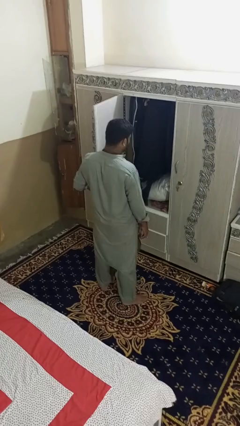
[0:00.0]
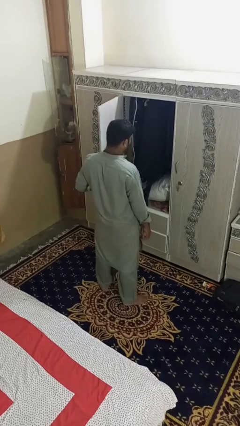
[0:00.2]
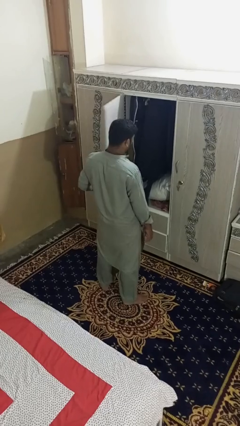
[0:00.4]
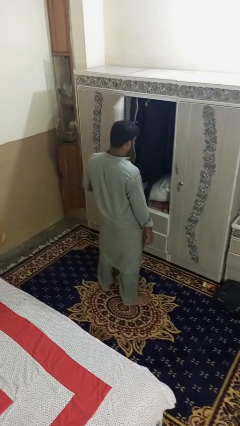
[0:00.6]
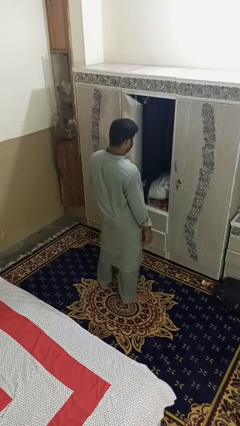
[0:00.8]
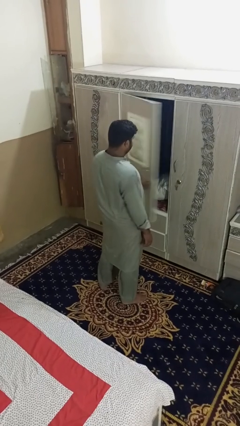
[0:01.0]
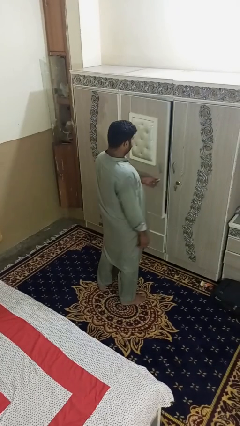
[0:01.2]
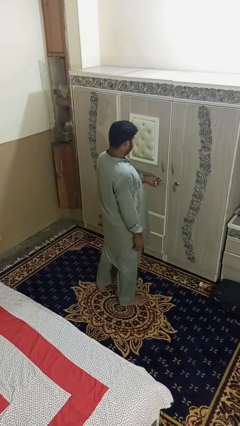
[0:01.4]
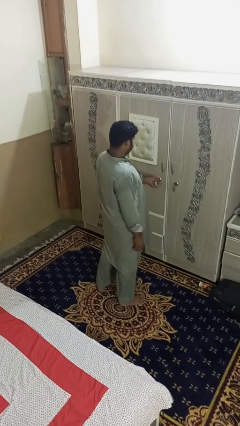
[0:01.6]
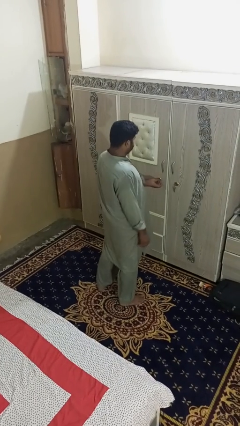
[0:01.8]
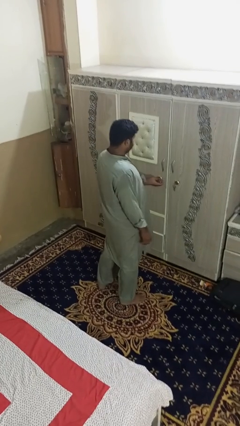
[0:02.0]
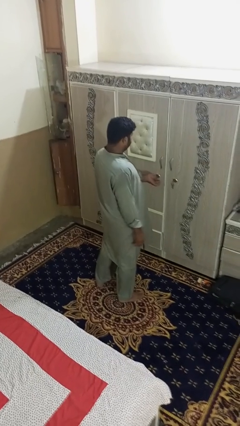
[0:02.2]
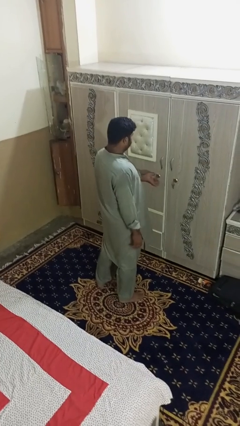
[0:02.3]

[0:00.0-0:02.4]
person closes dresser drawer

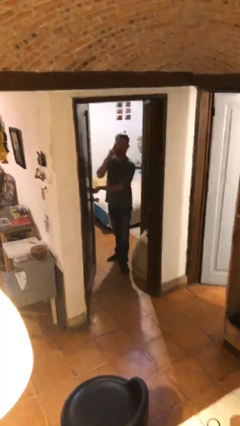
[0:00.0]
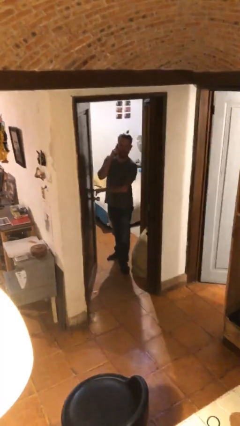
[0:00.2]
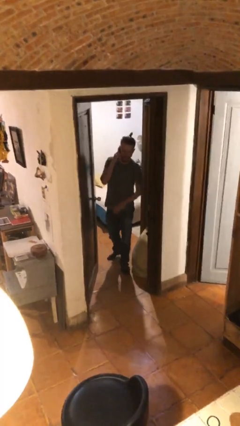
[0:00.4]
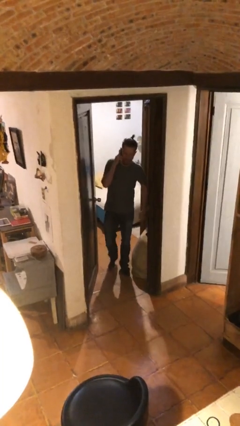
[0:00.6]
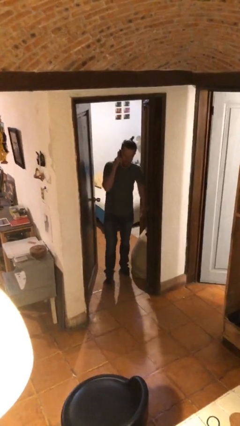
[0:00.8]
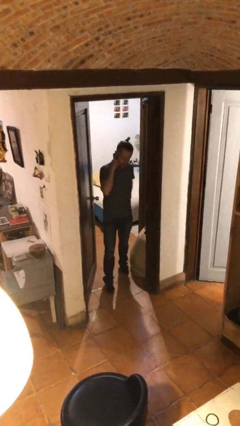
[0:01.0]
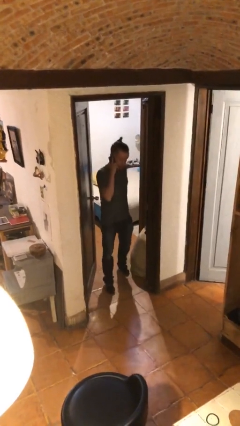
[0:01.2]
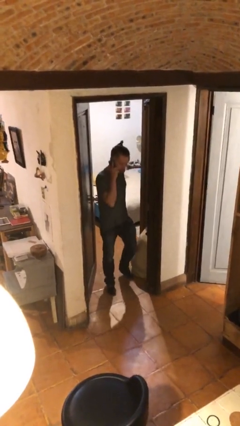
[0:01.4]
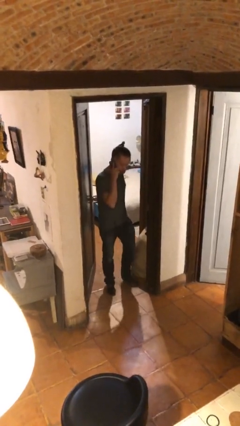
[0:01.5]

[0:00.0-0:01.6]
person enters scene through structure

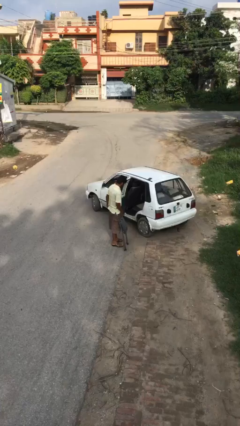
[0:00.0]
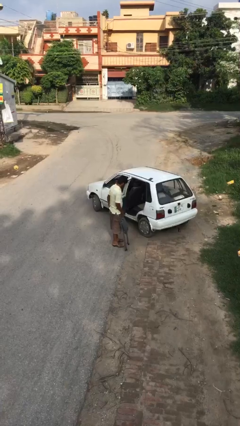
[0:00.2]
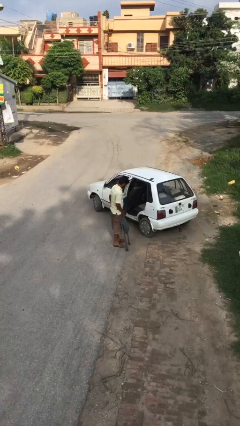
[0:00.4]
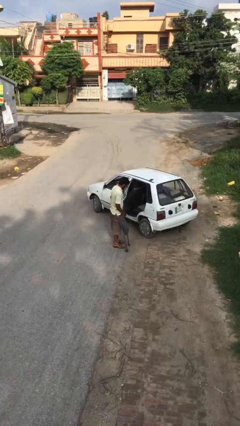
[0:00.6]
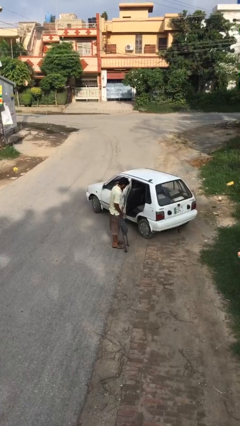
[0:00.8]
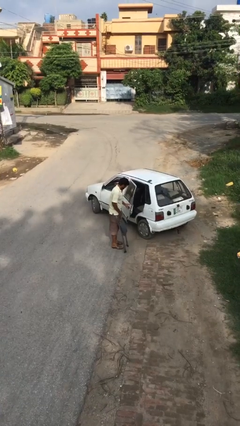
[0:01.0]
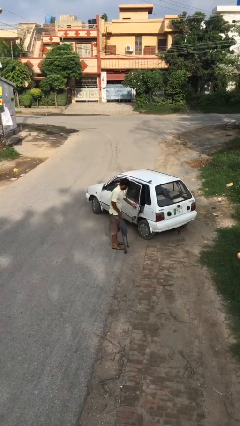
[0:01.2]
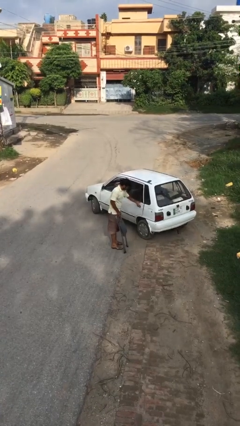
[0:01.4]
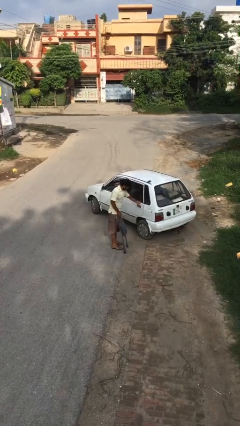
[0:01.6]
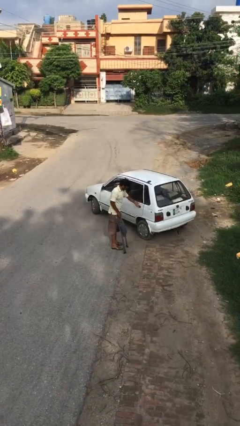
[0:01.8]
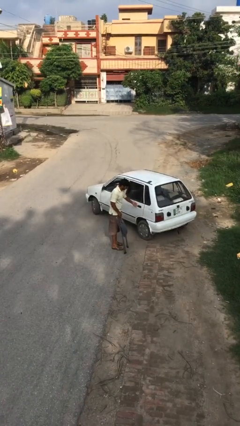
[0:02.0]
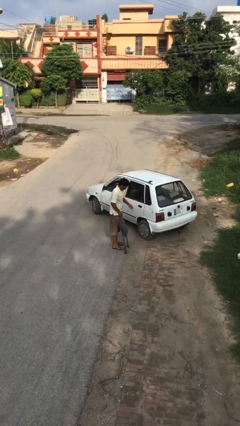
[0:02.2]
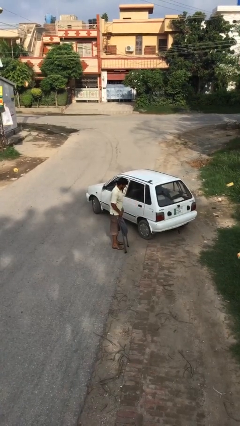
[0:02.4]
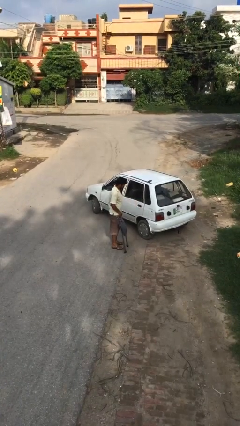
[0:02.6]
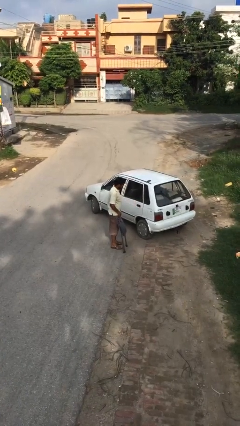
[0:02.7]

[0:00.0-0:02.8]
person closes car door

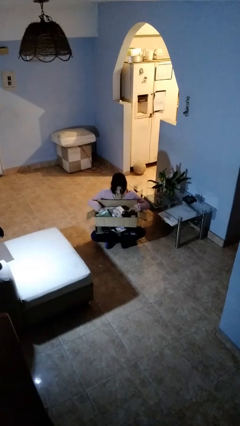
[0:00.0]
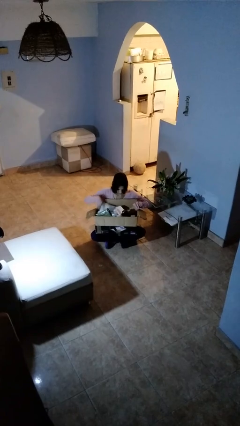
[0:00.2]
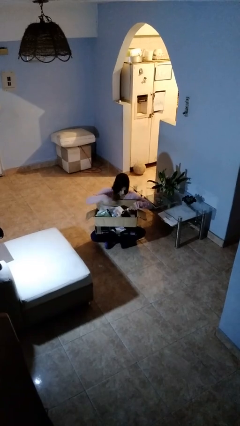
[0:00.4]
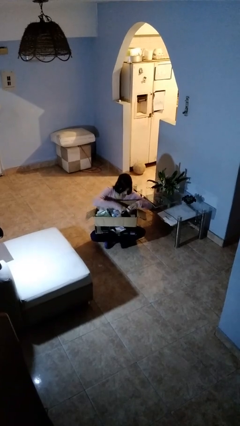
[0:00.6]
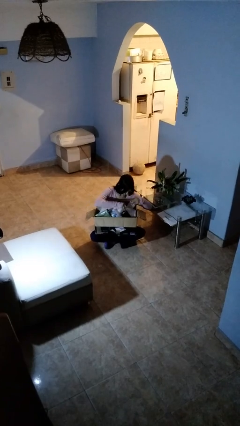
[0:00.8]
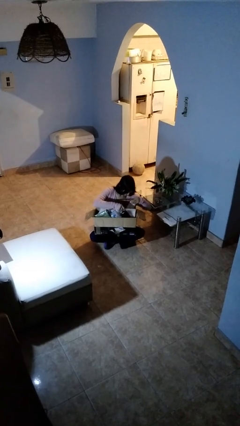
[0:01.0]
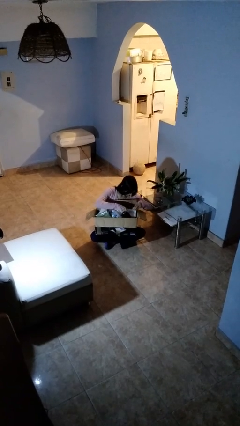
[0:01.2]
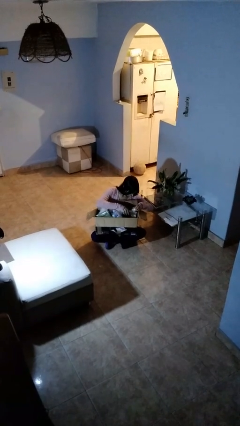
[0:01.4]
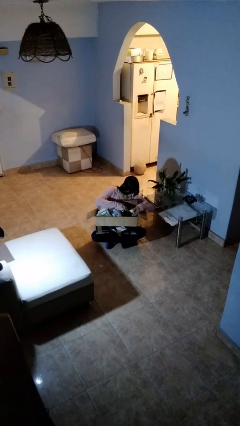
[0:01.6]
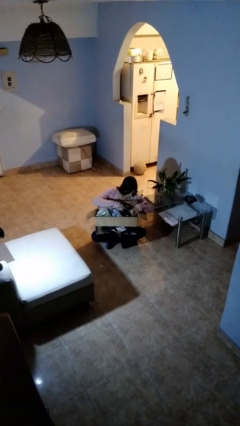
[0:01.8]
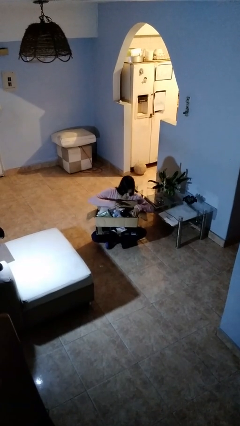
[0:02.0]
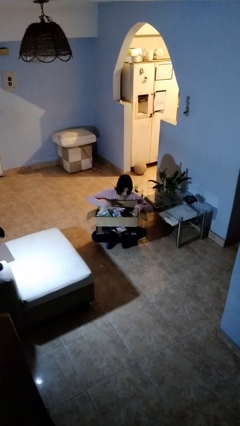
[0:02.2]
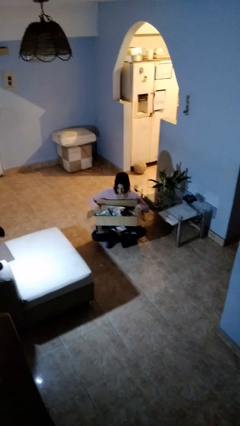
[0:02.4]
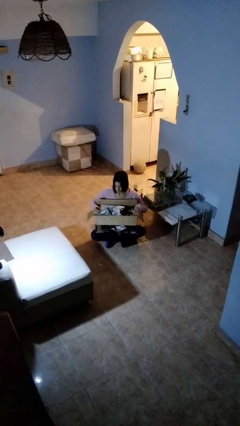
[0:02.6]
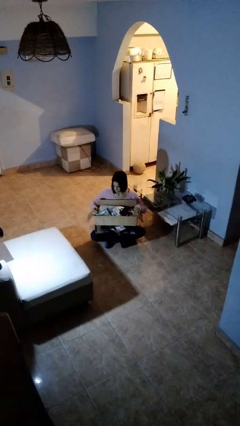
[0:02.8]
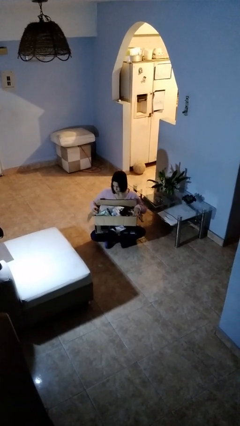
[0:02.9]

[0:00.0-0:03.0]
person searches in box

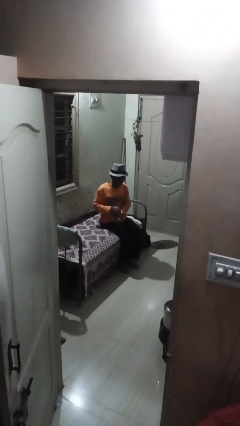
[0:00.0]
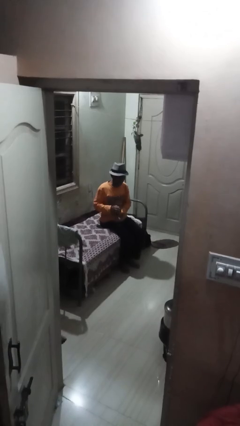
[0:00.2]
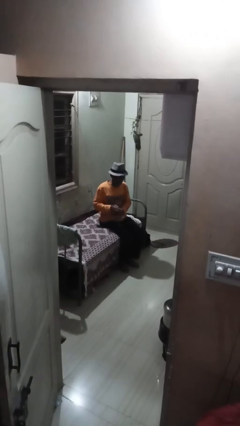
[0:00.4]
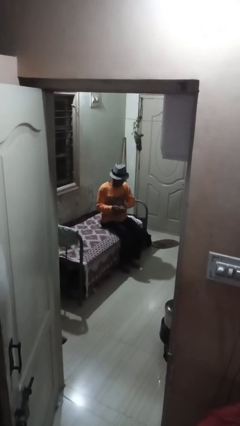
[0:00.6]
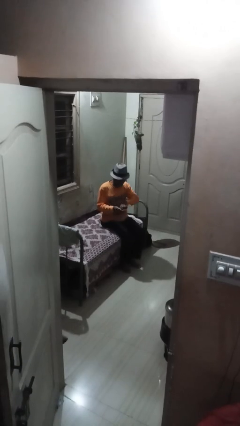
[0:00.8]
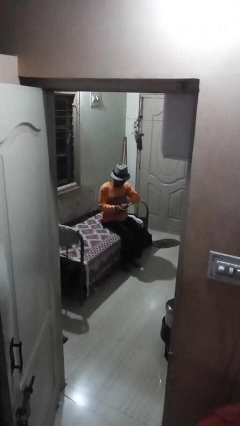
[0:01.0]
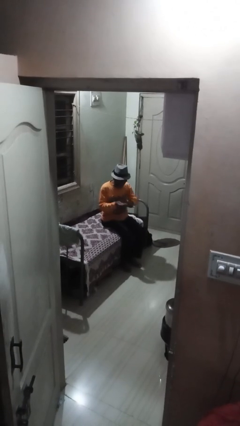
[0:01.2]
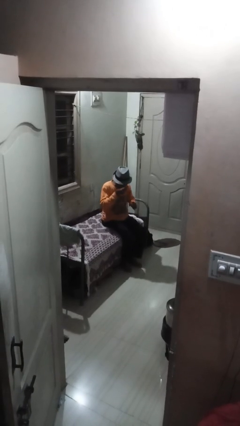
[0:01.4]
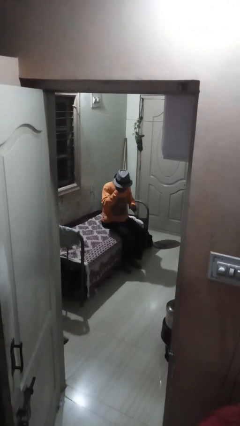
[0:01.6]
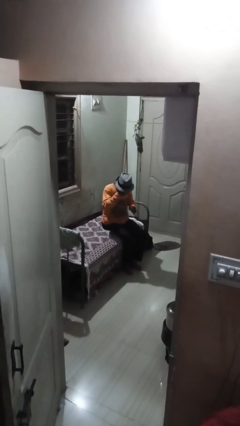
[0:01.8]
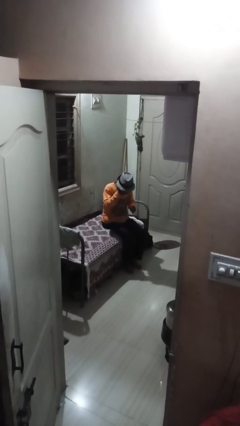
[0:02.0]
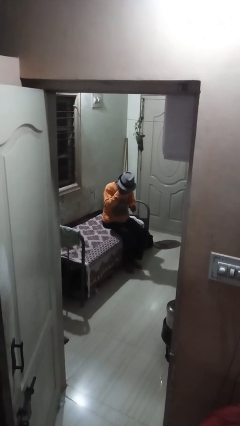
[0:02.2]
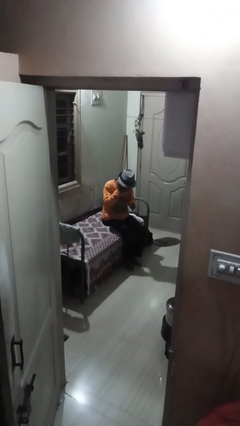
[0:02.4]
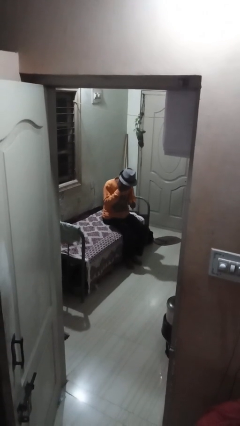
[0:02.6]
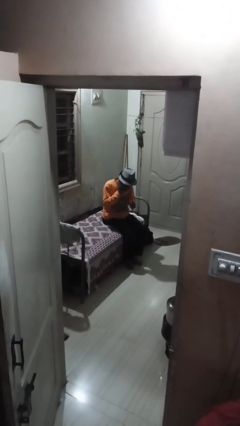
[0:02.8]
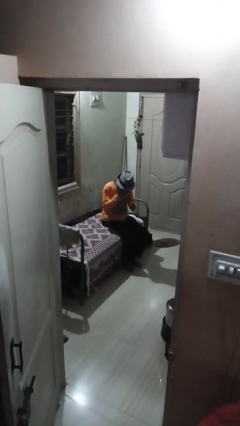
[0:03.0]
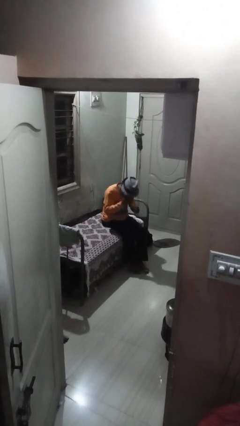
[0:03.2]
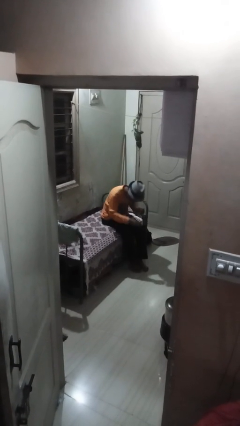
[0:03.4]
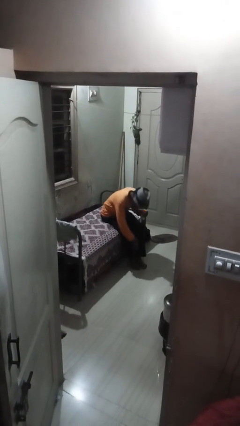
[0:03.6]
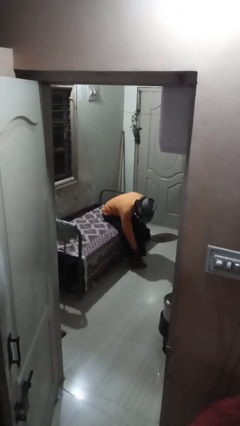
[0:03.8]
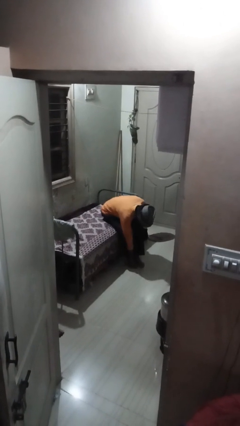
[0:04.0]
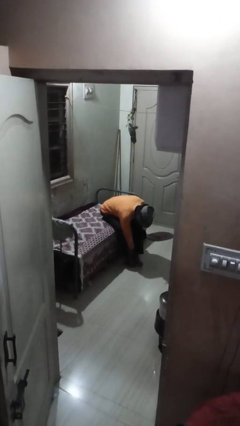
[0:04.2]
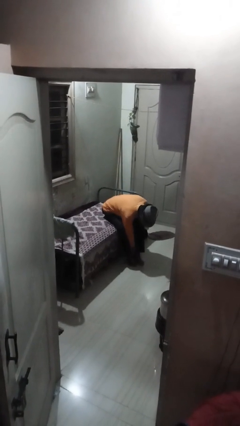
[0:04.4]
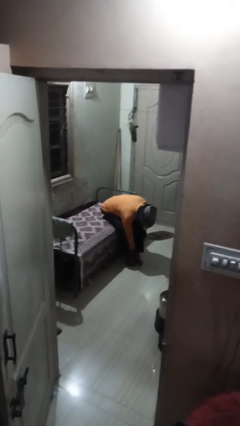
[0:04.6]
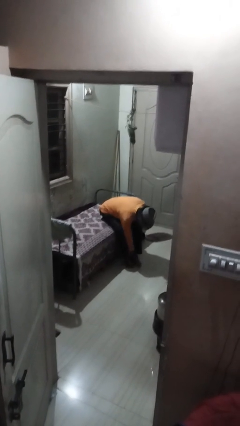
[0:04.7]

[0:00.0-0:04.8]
person applies facial moisturizer

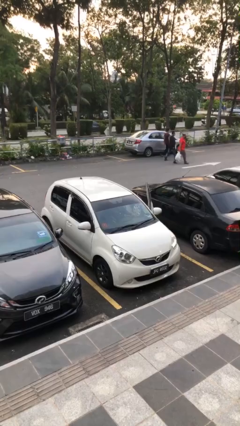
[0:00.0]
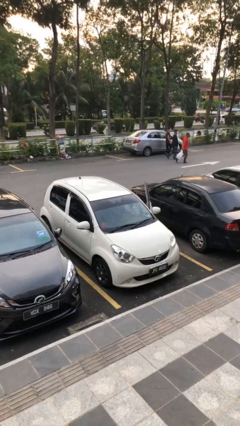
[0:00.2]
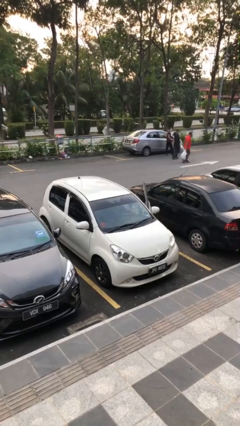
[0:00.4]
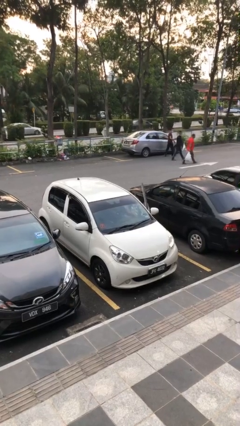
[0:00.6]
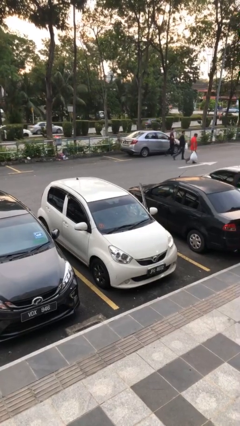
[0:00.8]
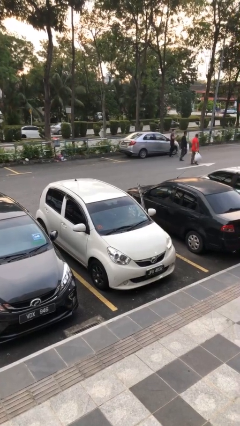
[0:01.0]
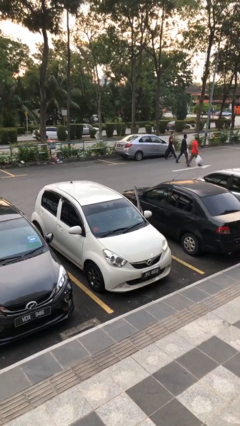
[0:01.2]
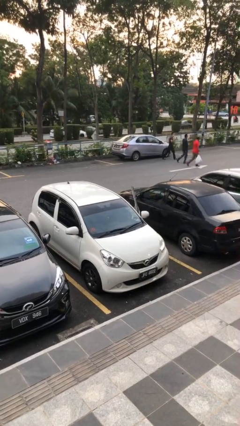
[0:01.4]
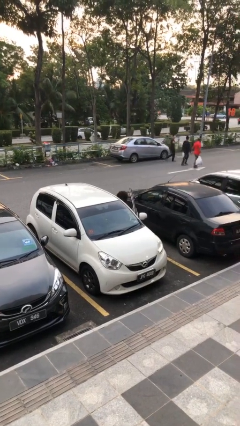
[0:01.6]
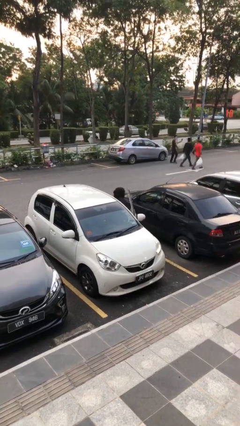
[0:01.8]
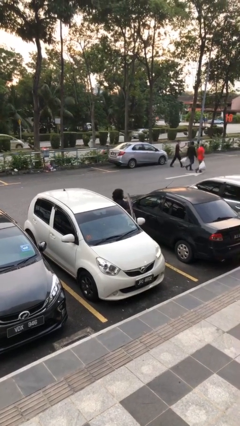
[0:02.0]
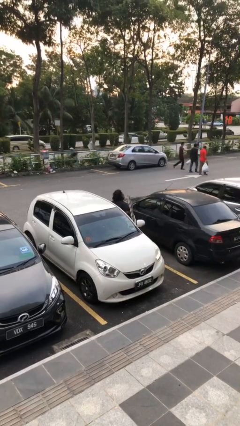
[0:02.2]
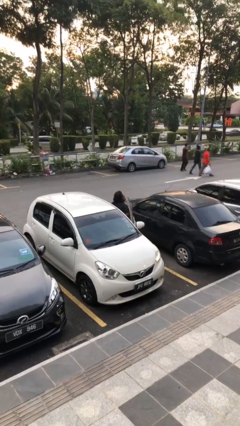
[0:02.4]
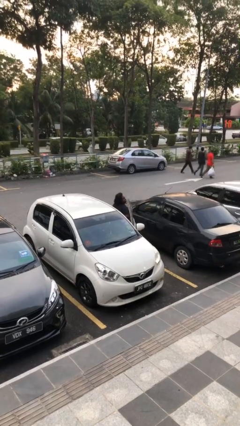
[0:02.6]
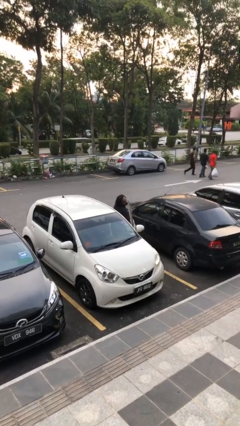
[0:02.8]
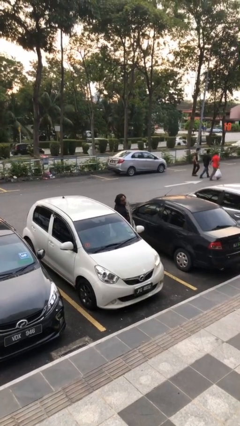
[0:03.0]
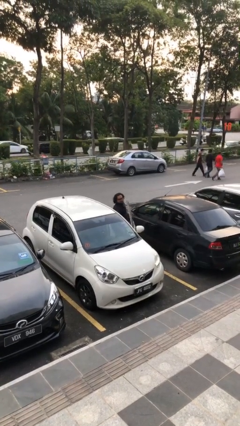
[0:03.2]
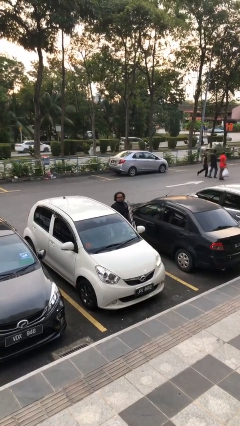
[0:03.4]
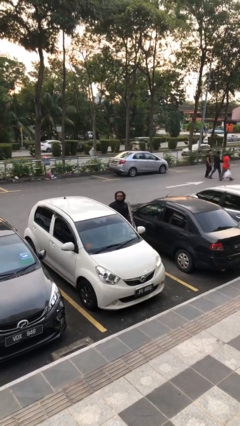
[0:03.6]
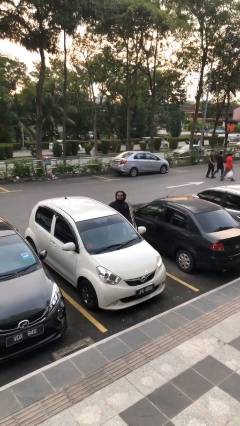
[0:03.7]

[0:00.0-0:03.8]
person exits car
